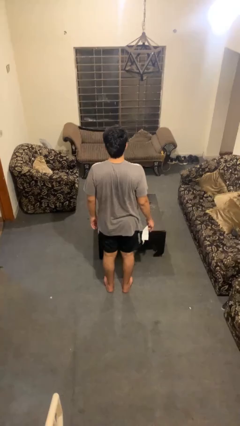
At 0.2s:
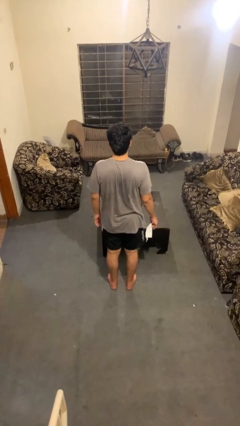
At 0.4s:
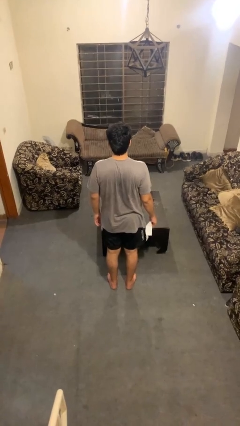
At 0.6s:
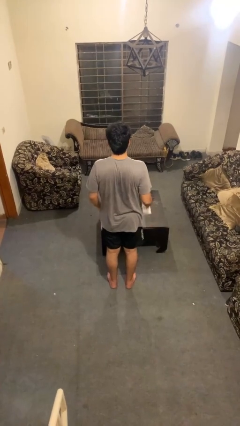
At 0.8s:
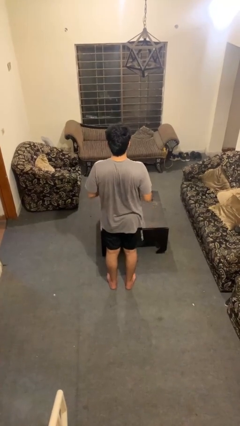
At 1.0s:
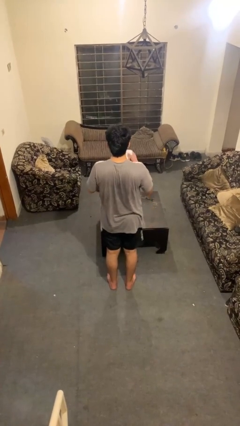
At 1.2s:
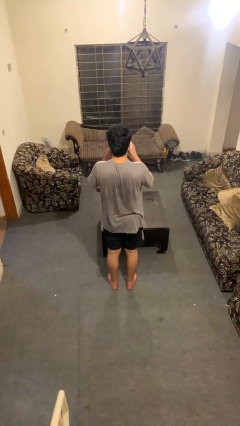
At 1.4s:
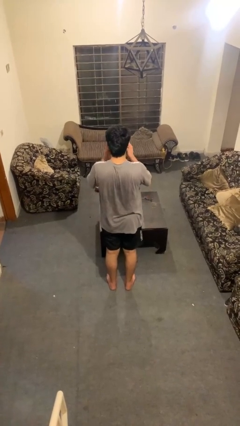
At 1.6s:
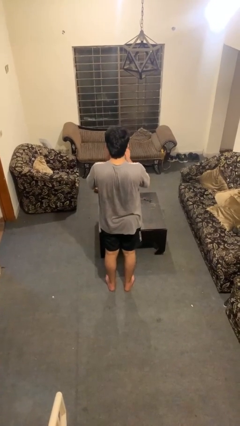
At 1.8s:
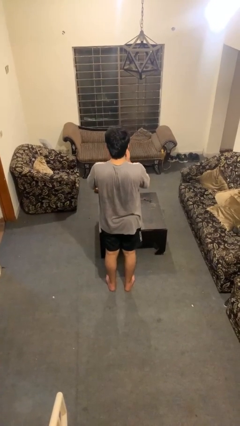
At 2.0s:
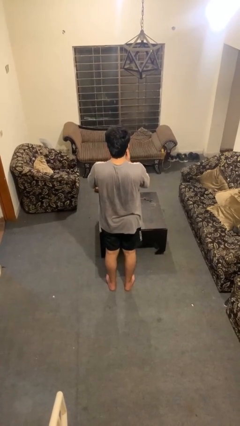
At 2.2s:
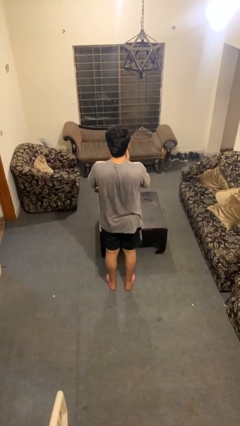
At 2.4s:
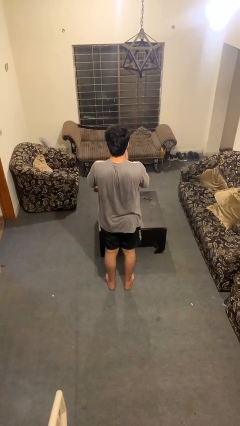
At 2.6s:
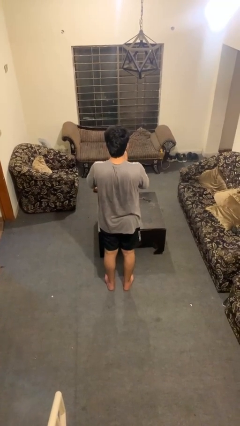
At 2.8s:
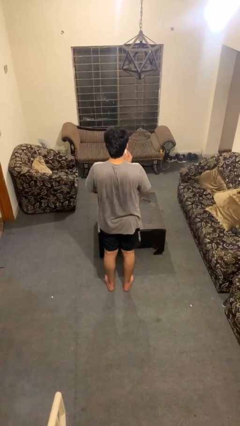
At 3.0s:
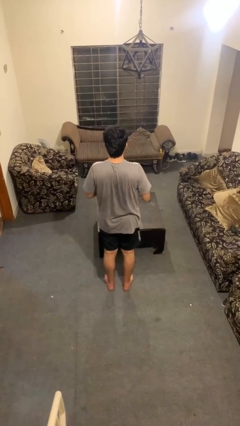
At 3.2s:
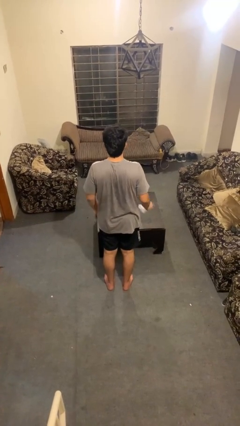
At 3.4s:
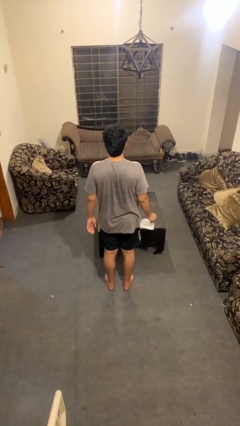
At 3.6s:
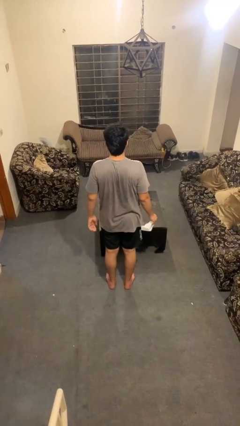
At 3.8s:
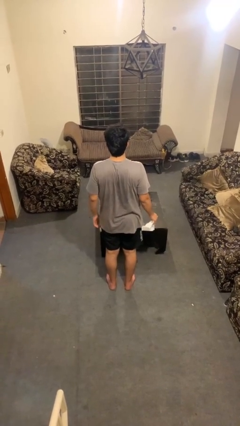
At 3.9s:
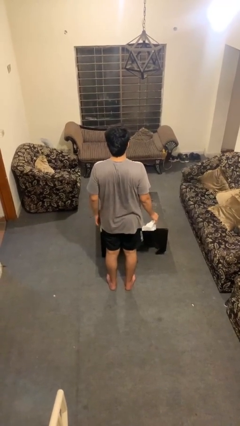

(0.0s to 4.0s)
person blows nose

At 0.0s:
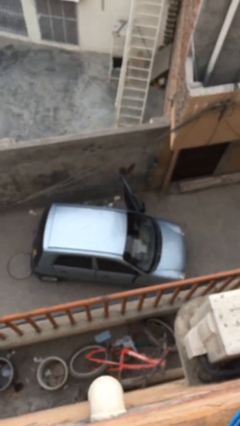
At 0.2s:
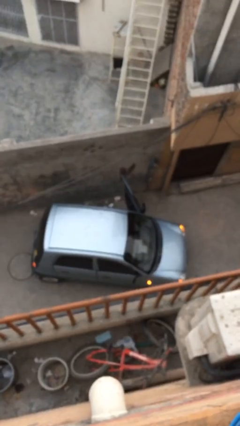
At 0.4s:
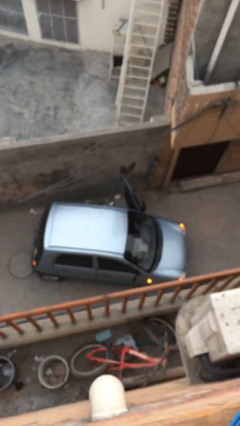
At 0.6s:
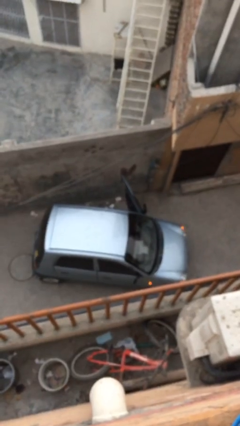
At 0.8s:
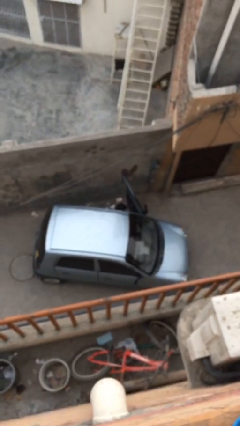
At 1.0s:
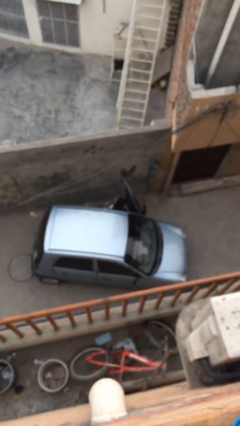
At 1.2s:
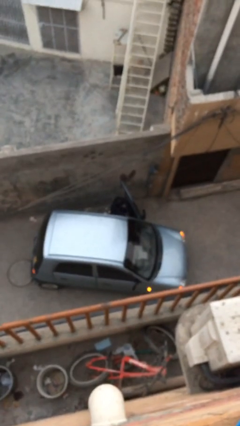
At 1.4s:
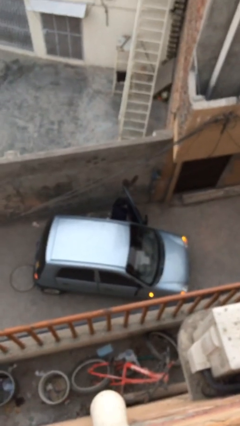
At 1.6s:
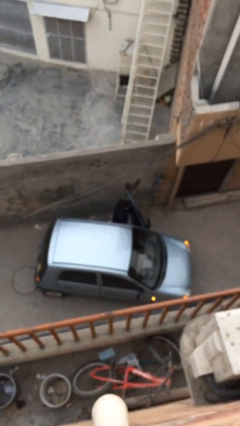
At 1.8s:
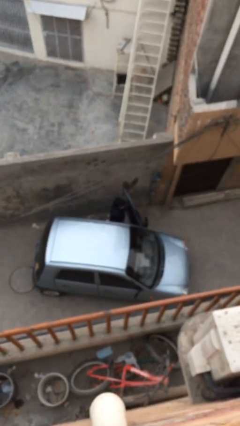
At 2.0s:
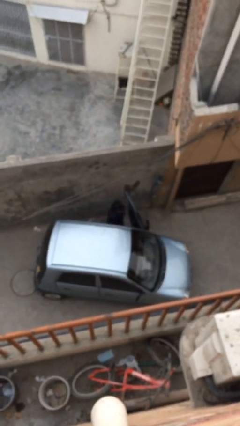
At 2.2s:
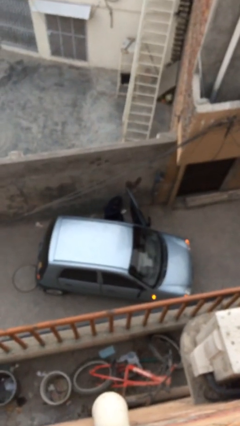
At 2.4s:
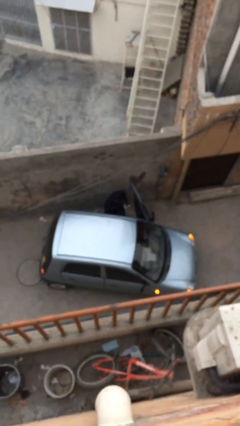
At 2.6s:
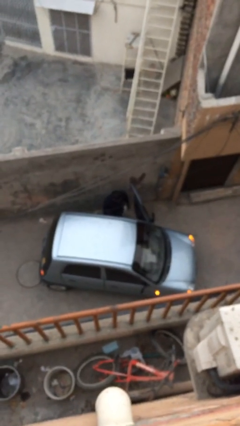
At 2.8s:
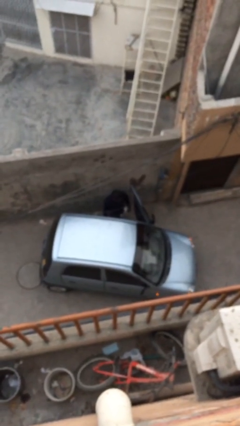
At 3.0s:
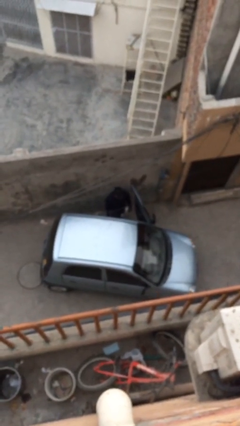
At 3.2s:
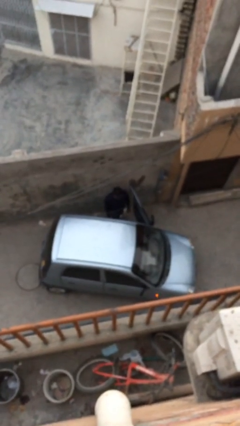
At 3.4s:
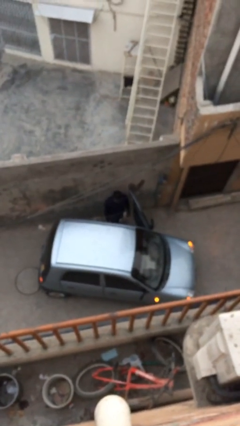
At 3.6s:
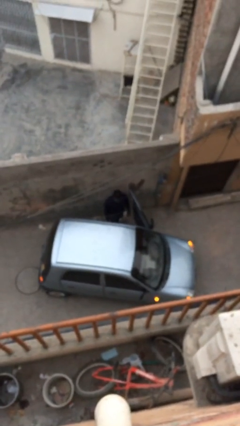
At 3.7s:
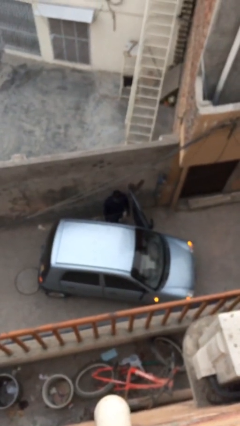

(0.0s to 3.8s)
person exits car

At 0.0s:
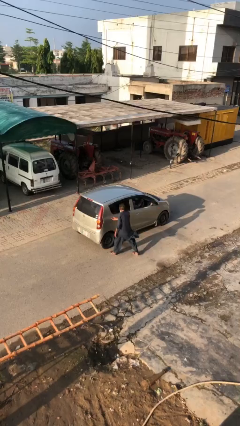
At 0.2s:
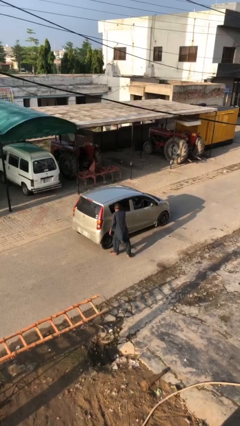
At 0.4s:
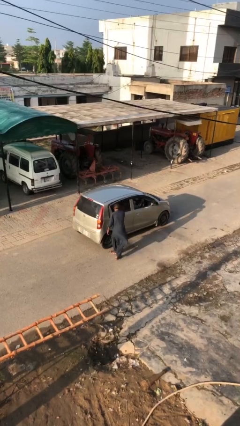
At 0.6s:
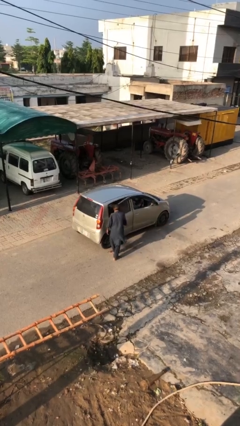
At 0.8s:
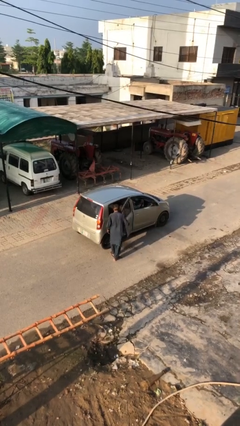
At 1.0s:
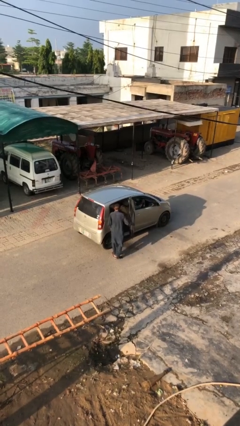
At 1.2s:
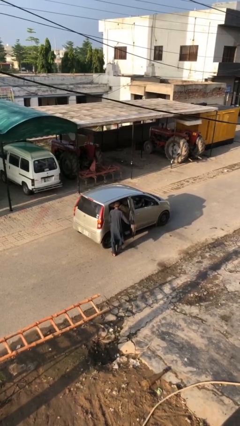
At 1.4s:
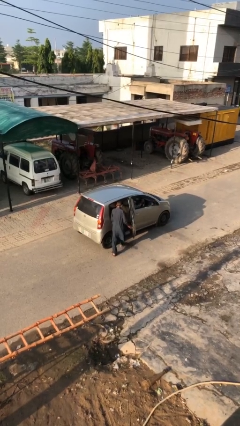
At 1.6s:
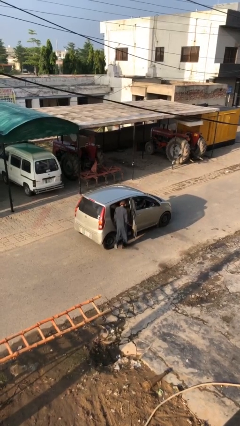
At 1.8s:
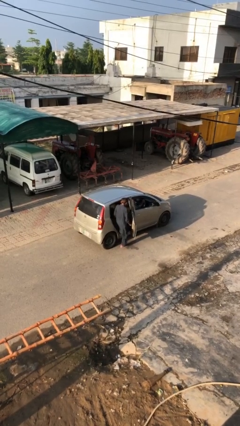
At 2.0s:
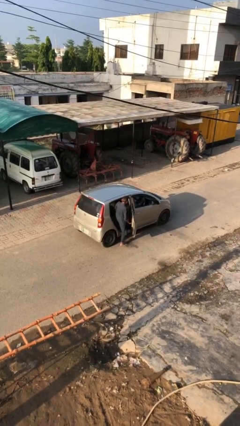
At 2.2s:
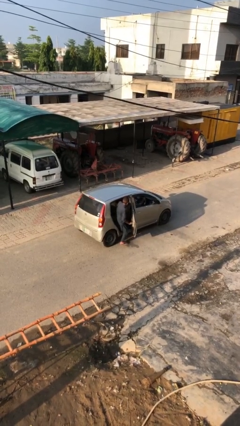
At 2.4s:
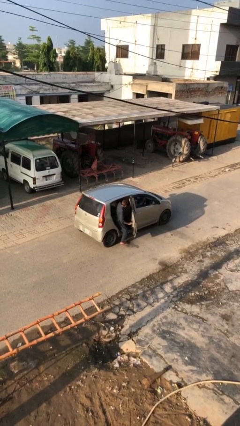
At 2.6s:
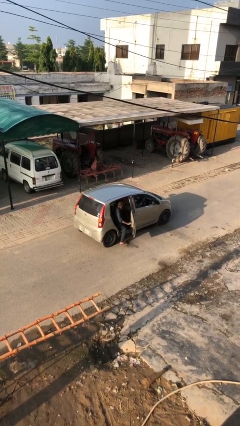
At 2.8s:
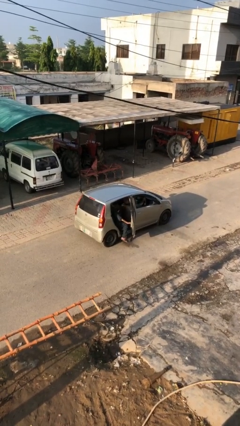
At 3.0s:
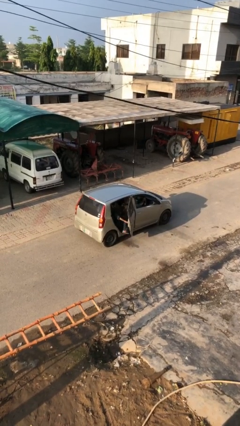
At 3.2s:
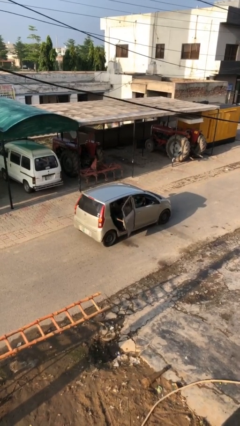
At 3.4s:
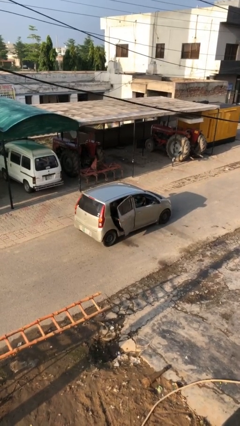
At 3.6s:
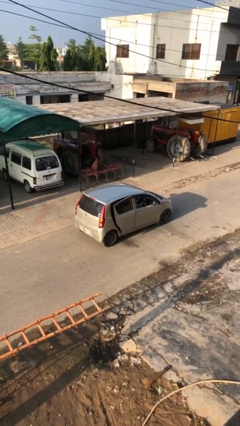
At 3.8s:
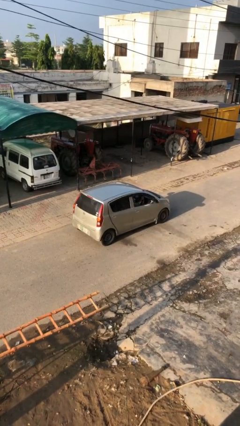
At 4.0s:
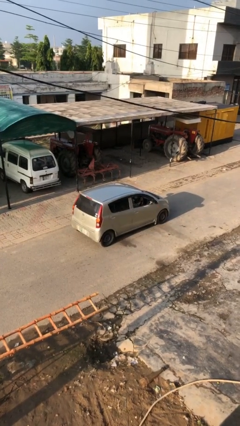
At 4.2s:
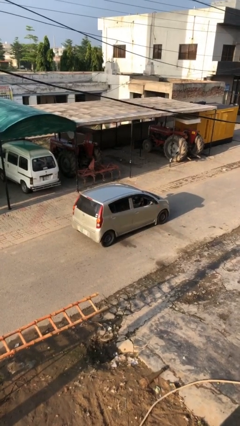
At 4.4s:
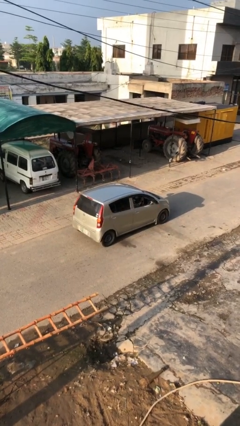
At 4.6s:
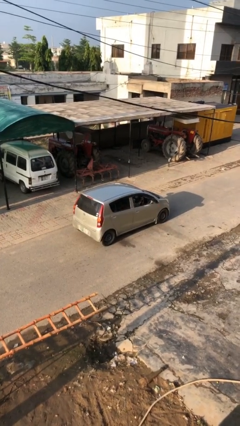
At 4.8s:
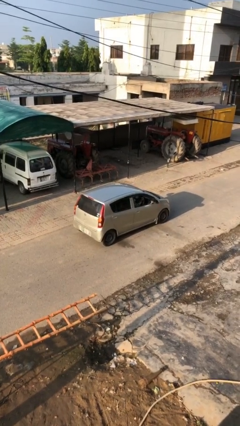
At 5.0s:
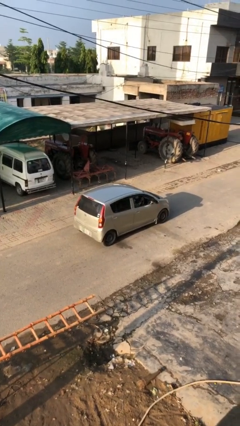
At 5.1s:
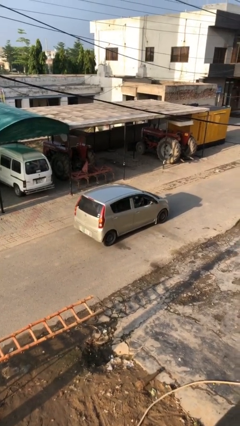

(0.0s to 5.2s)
car picks up person

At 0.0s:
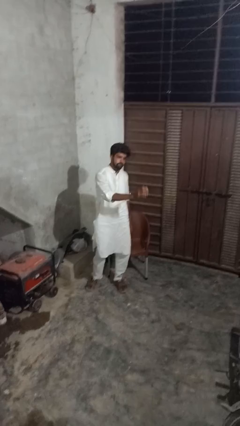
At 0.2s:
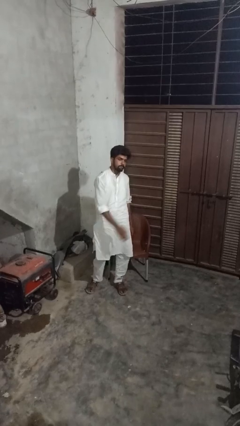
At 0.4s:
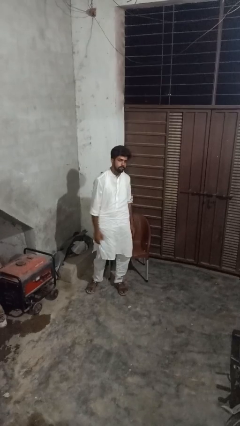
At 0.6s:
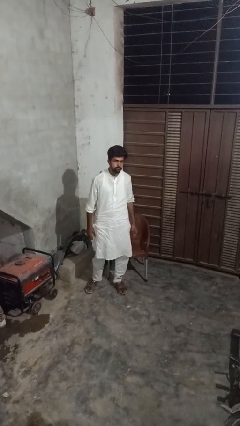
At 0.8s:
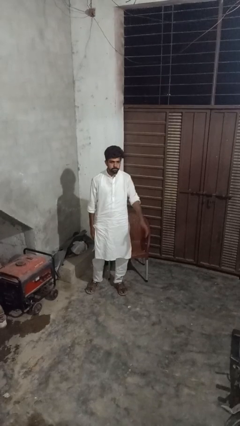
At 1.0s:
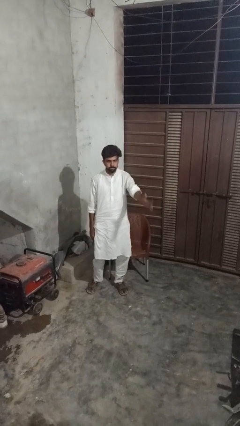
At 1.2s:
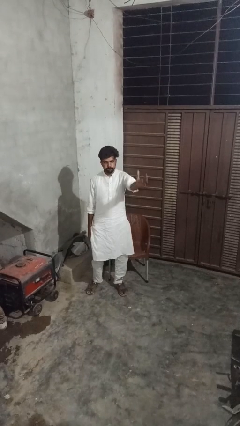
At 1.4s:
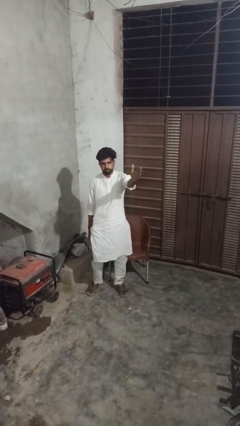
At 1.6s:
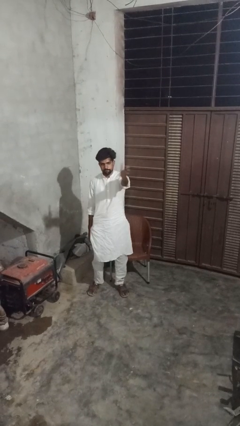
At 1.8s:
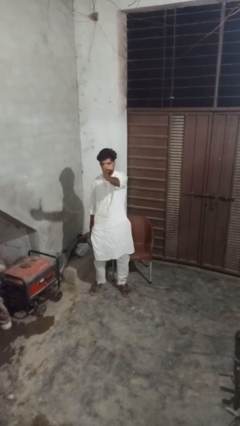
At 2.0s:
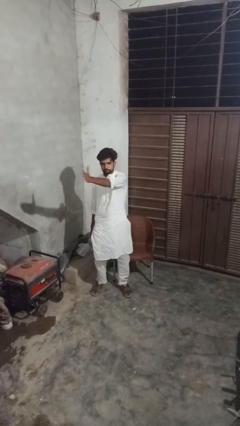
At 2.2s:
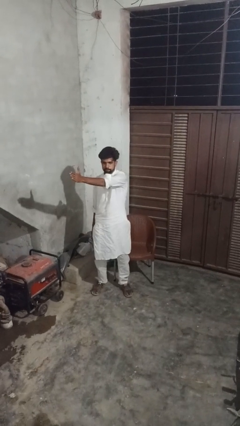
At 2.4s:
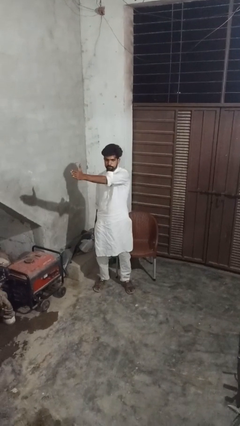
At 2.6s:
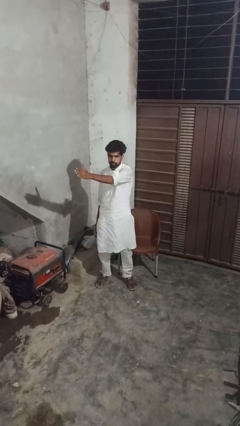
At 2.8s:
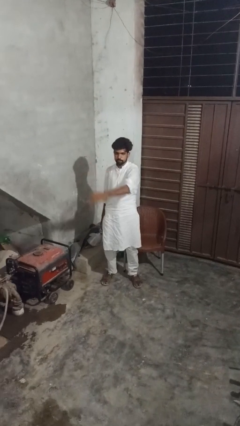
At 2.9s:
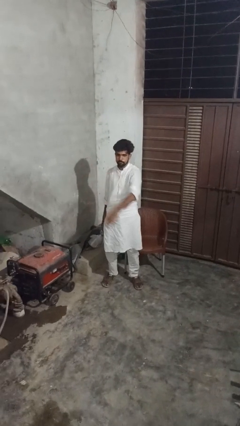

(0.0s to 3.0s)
person gestures swipe right

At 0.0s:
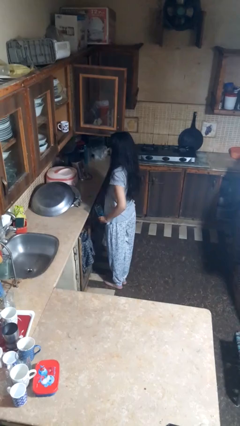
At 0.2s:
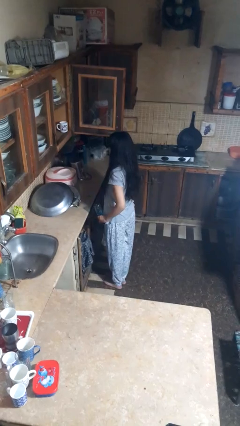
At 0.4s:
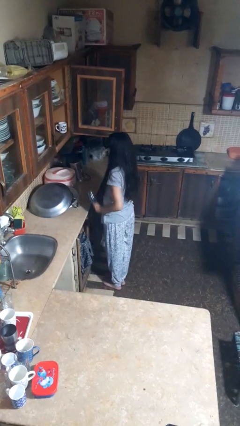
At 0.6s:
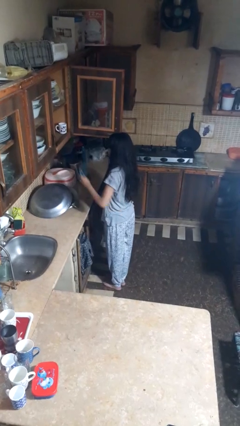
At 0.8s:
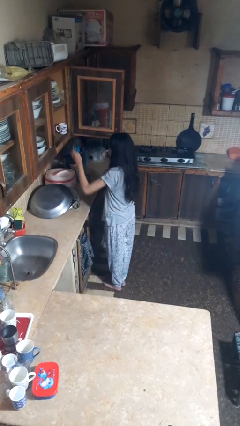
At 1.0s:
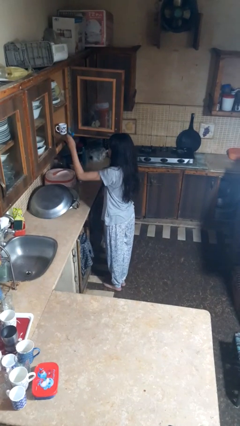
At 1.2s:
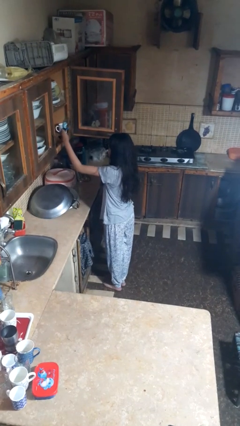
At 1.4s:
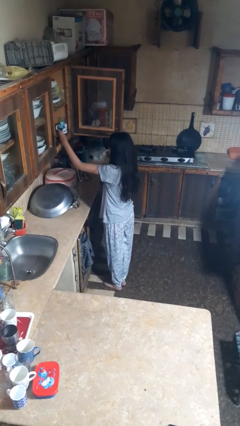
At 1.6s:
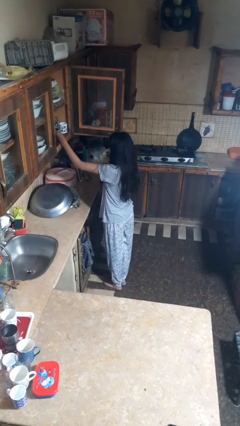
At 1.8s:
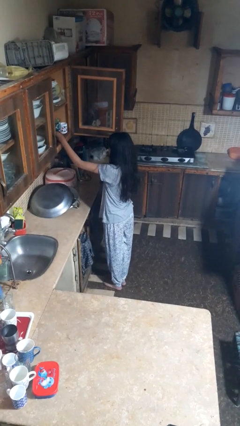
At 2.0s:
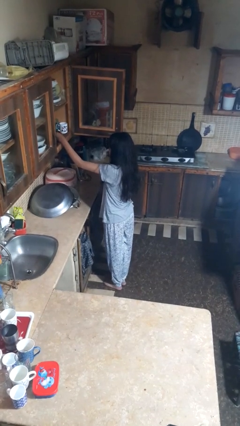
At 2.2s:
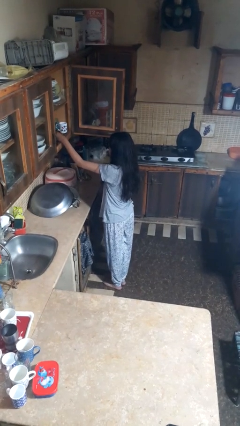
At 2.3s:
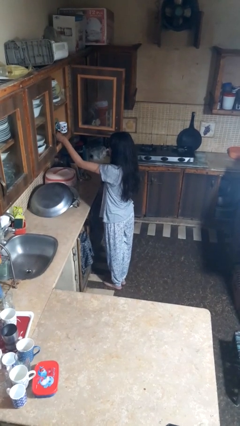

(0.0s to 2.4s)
person puts object in cabinet
